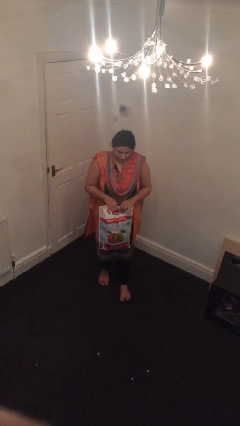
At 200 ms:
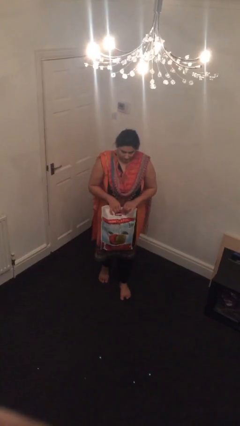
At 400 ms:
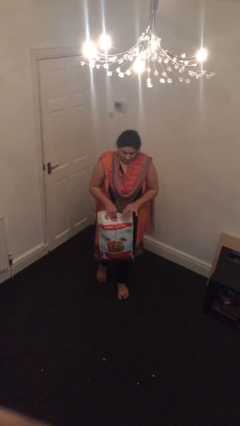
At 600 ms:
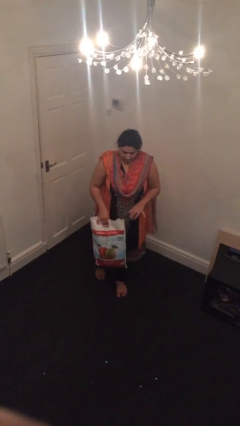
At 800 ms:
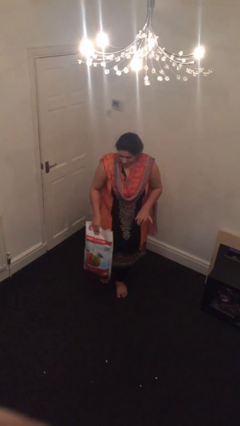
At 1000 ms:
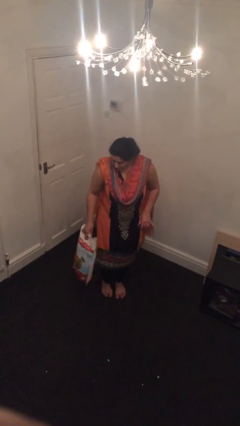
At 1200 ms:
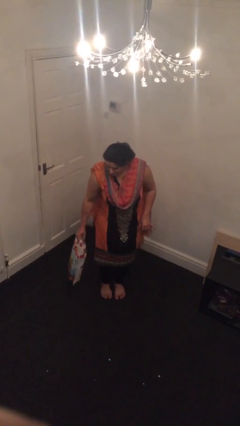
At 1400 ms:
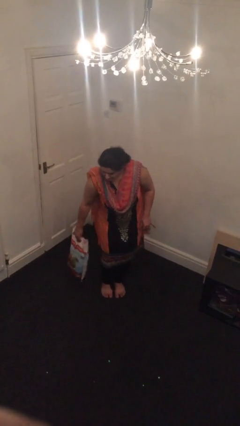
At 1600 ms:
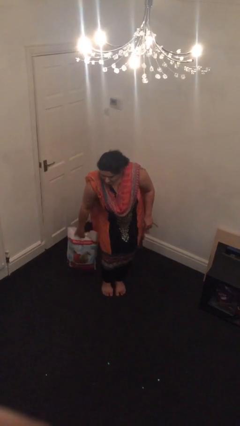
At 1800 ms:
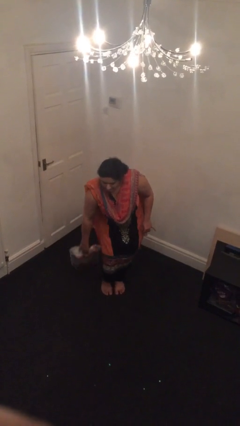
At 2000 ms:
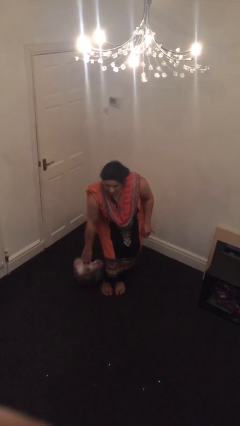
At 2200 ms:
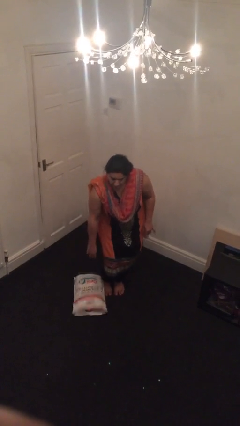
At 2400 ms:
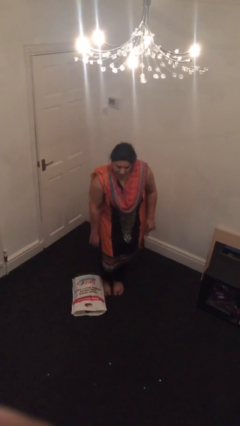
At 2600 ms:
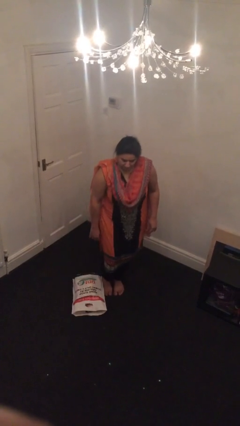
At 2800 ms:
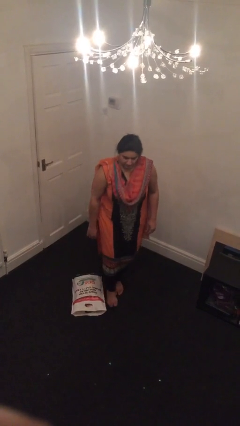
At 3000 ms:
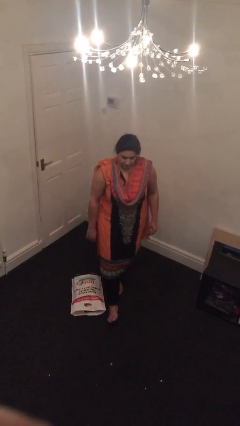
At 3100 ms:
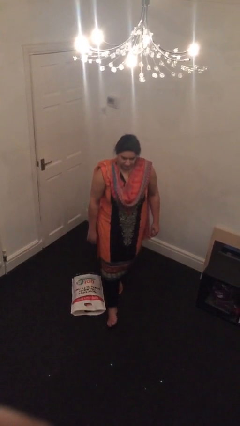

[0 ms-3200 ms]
person puts down object on floor

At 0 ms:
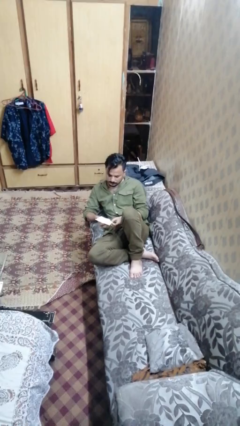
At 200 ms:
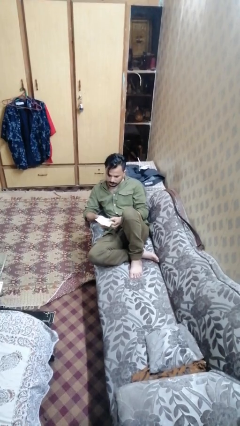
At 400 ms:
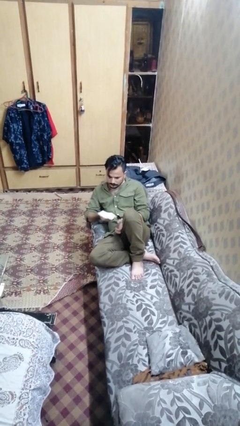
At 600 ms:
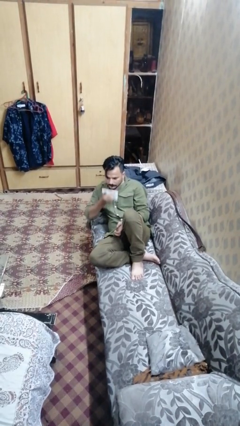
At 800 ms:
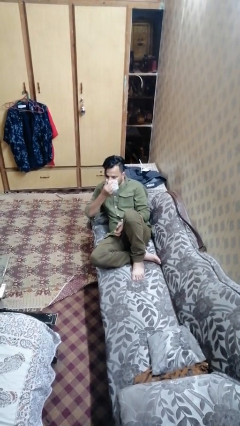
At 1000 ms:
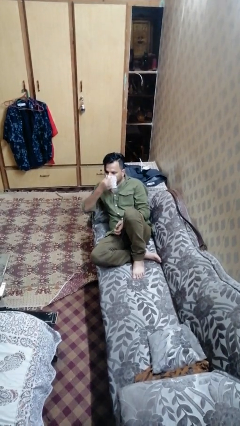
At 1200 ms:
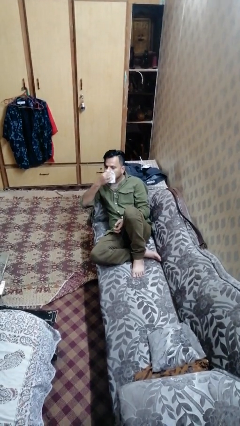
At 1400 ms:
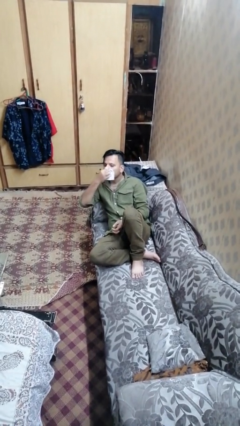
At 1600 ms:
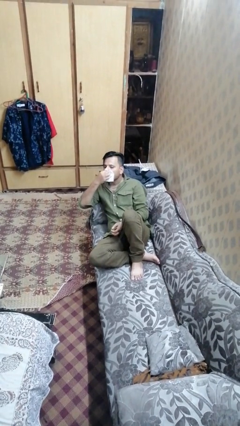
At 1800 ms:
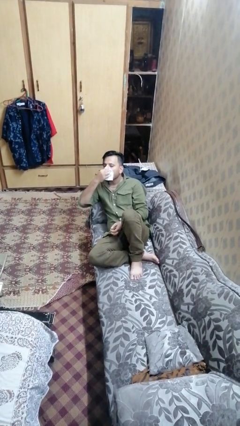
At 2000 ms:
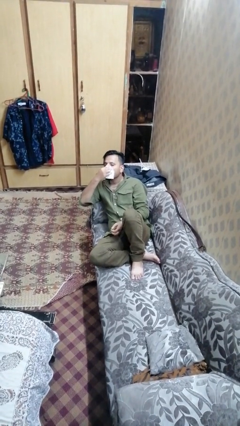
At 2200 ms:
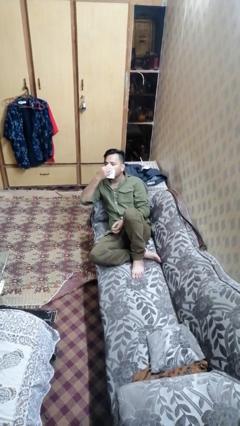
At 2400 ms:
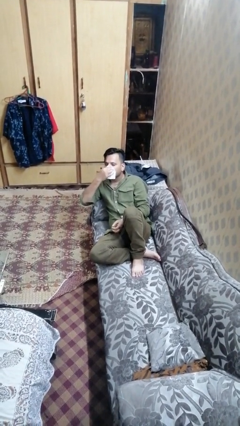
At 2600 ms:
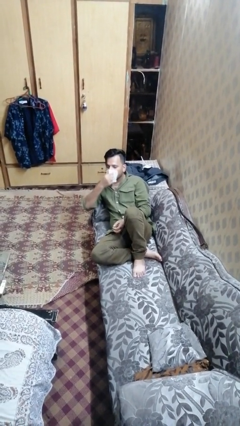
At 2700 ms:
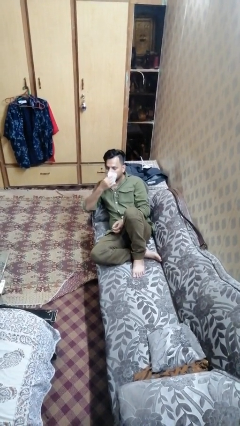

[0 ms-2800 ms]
person blows nose

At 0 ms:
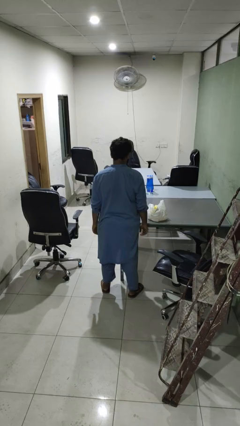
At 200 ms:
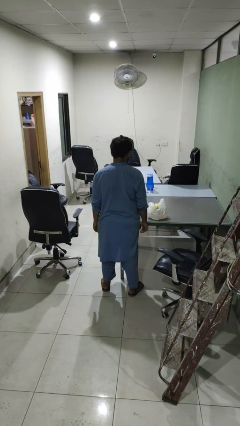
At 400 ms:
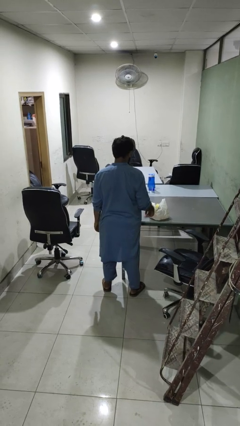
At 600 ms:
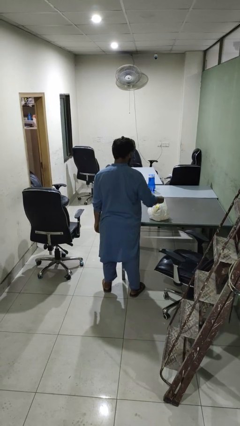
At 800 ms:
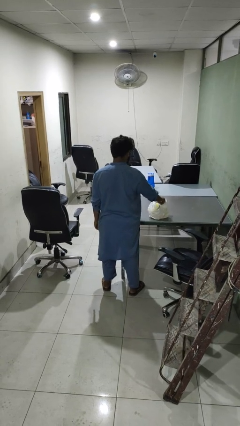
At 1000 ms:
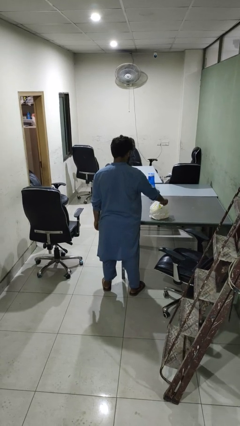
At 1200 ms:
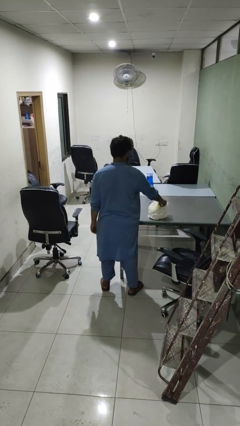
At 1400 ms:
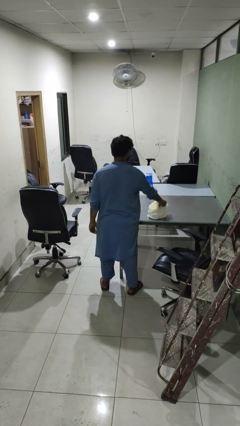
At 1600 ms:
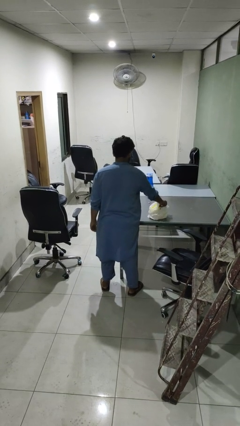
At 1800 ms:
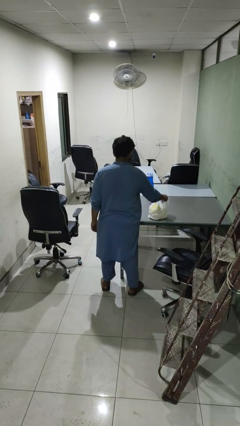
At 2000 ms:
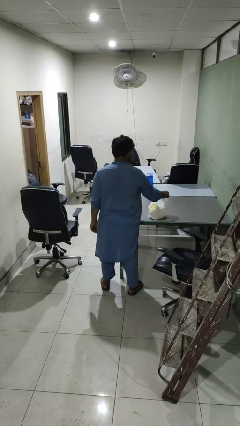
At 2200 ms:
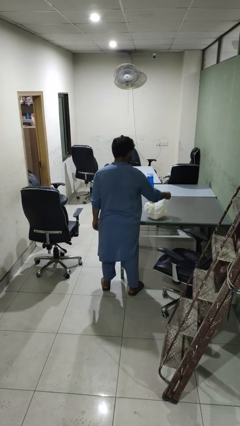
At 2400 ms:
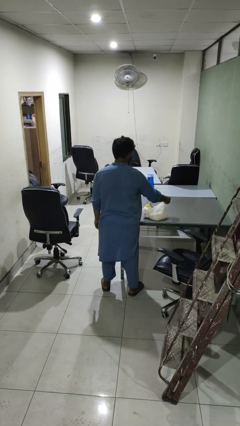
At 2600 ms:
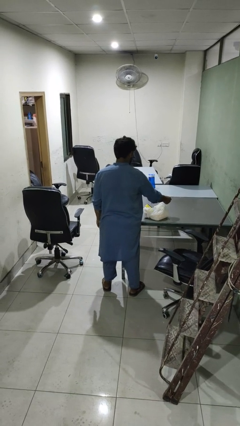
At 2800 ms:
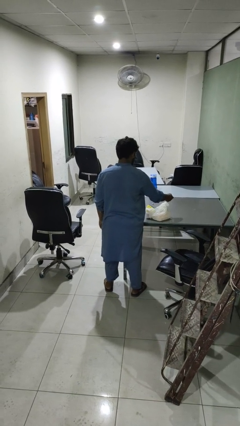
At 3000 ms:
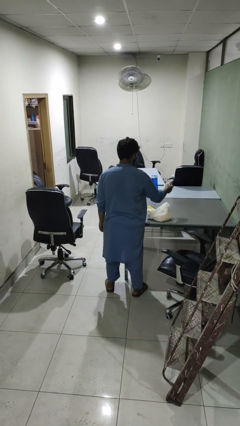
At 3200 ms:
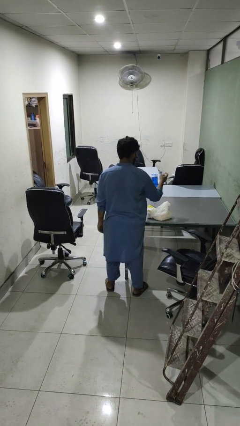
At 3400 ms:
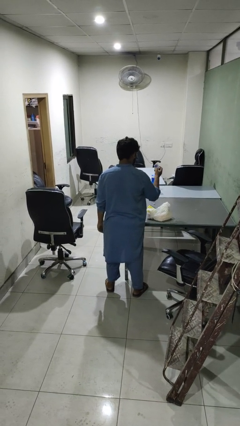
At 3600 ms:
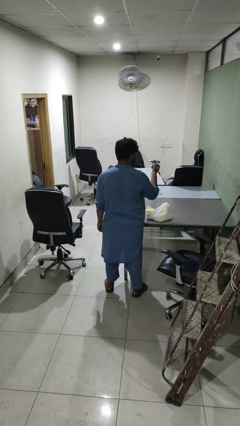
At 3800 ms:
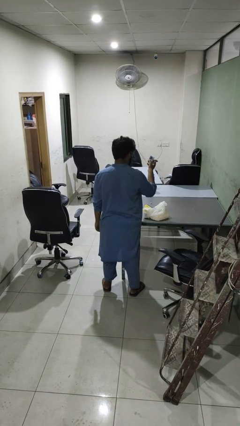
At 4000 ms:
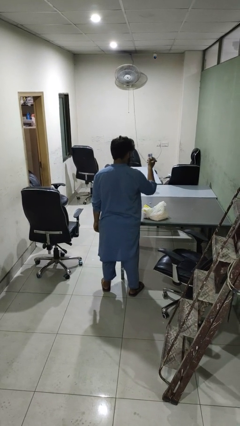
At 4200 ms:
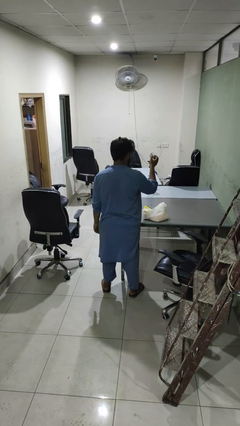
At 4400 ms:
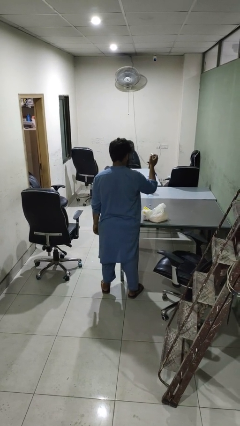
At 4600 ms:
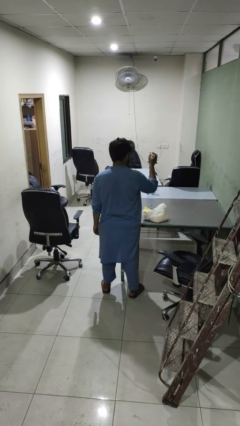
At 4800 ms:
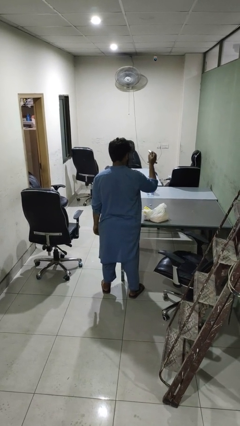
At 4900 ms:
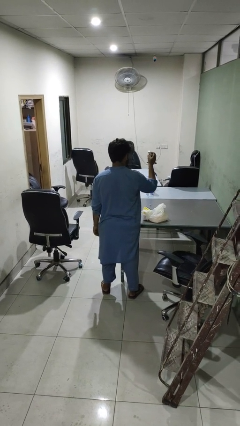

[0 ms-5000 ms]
person takes object from bag

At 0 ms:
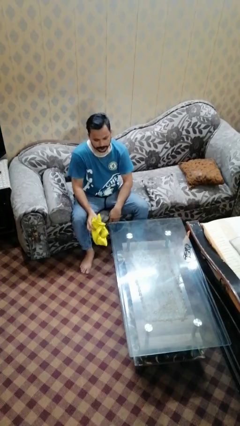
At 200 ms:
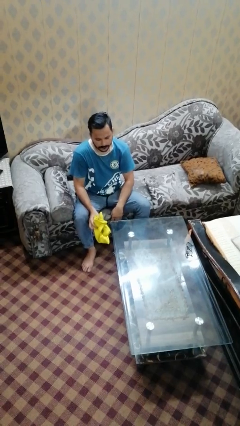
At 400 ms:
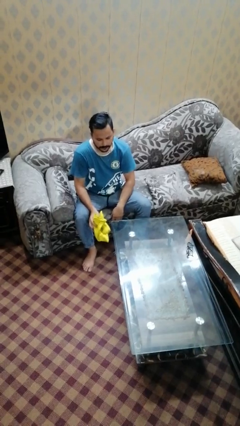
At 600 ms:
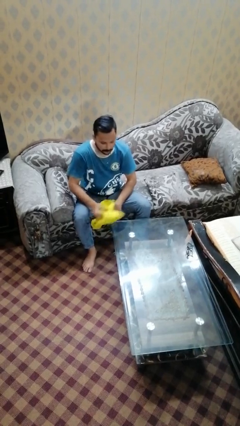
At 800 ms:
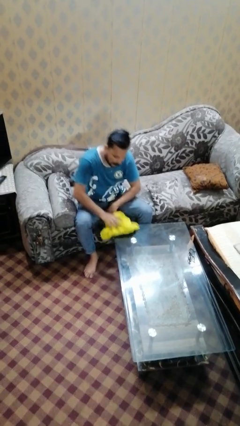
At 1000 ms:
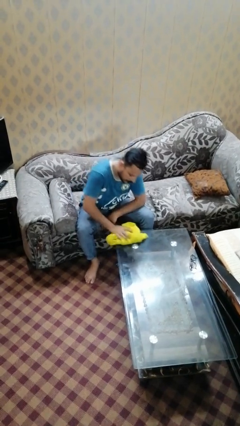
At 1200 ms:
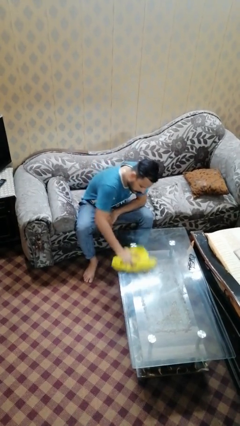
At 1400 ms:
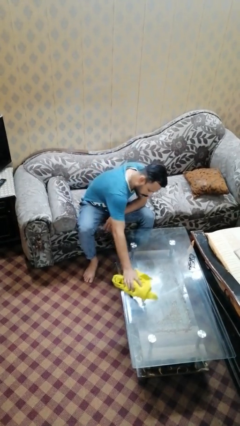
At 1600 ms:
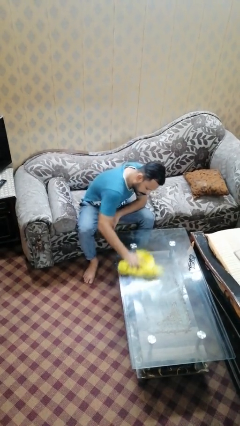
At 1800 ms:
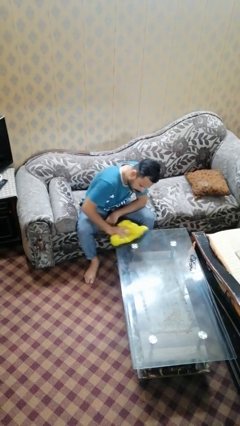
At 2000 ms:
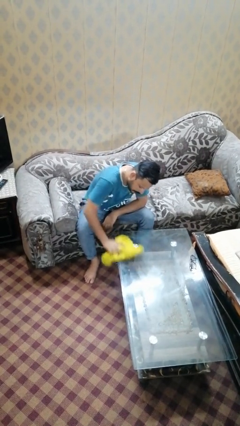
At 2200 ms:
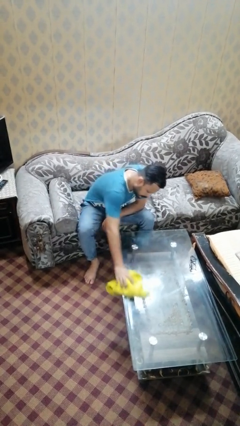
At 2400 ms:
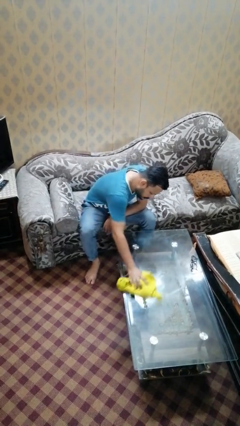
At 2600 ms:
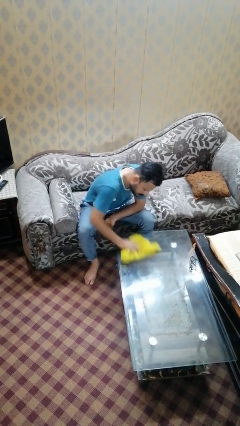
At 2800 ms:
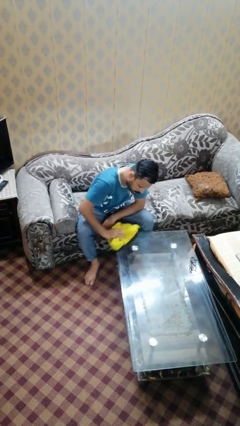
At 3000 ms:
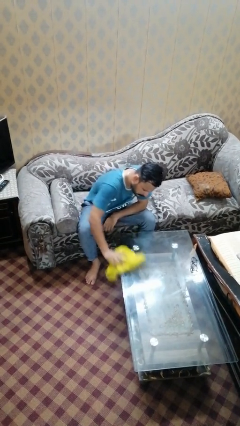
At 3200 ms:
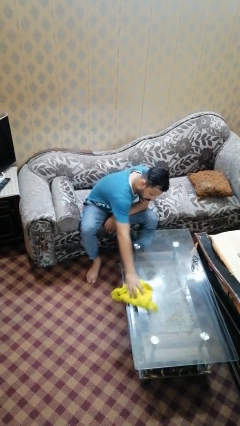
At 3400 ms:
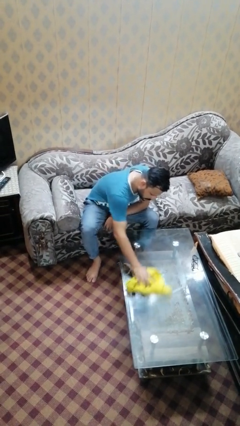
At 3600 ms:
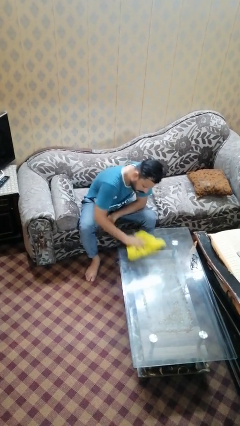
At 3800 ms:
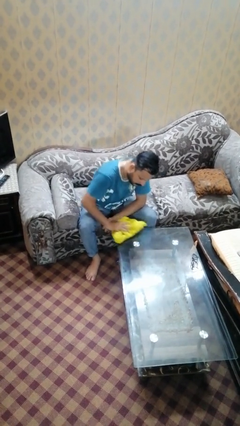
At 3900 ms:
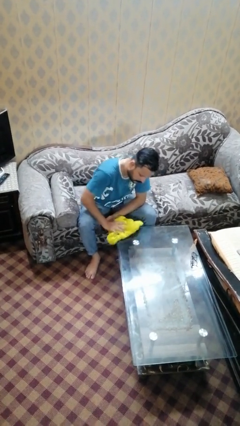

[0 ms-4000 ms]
person cleans table with rag

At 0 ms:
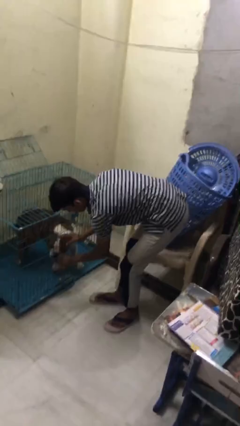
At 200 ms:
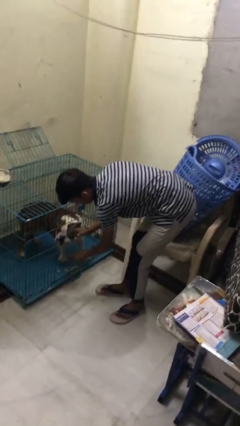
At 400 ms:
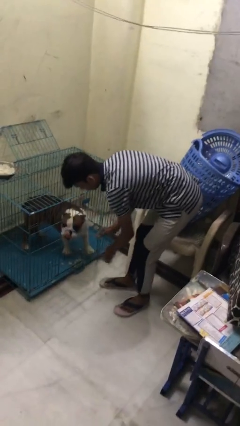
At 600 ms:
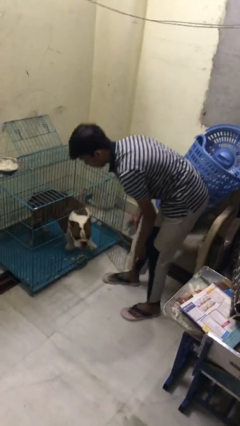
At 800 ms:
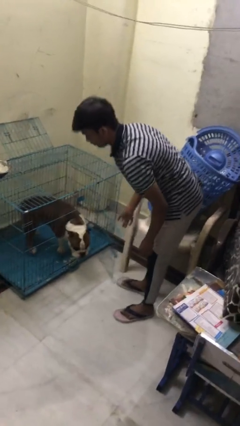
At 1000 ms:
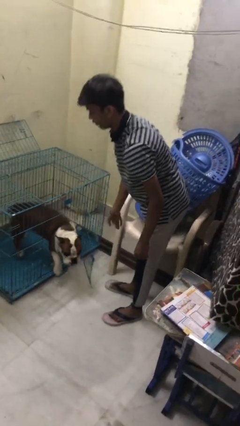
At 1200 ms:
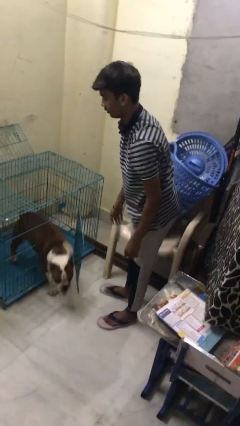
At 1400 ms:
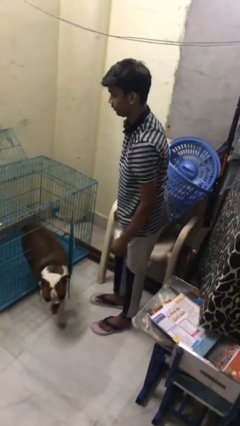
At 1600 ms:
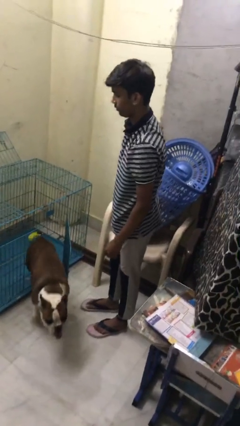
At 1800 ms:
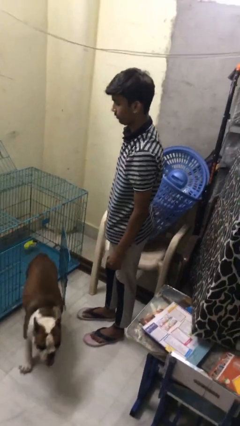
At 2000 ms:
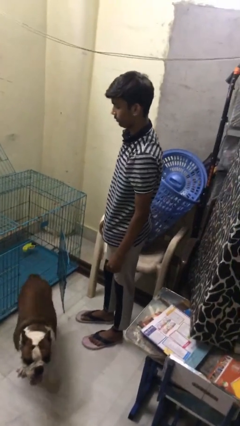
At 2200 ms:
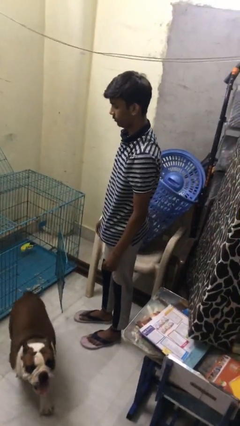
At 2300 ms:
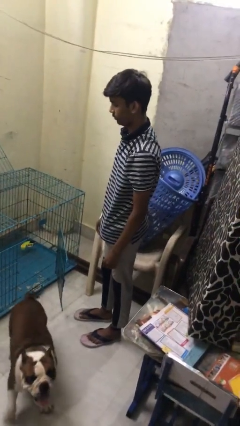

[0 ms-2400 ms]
person uncrates dog
